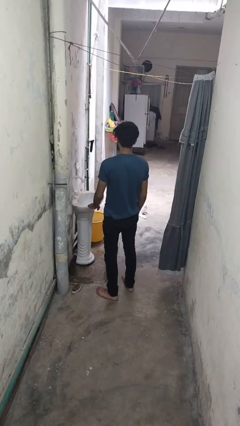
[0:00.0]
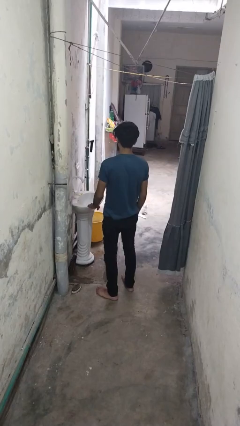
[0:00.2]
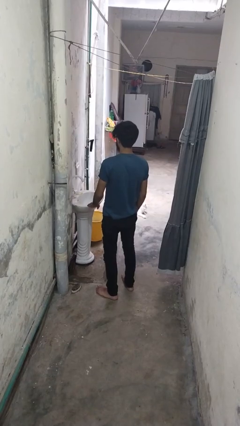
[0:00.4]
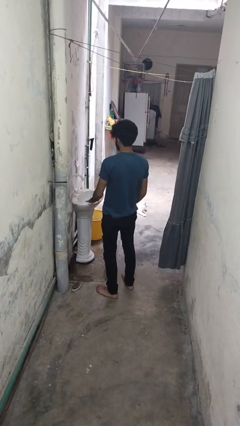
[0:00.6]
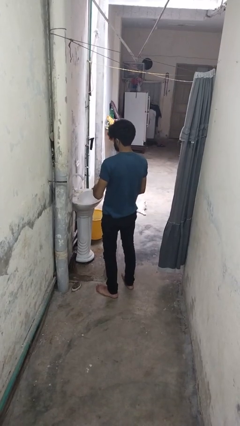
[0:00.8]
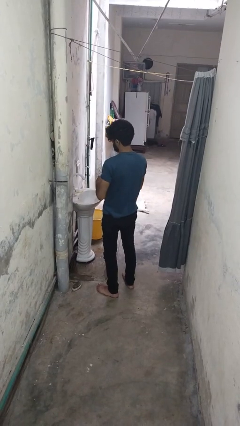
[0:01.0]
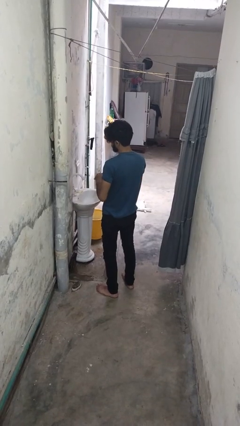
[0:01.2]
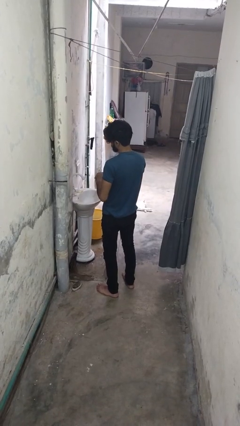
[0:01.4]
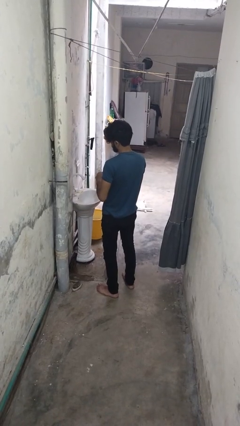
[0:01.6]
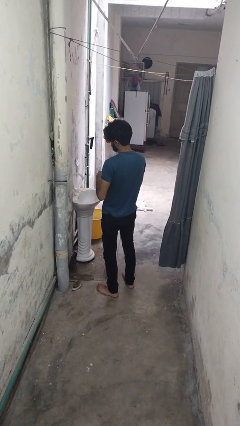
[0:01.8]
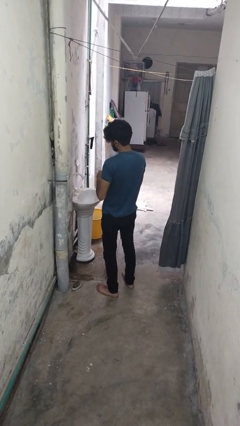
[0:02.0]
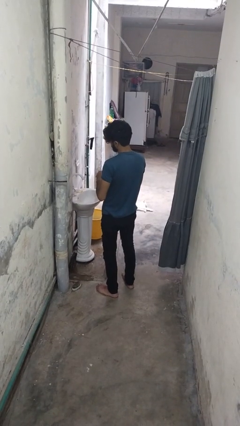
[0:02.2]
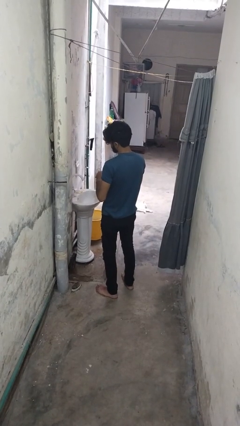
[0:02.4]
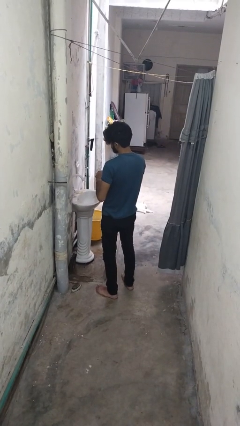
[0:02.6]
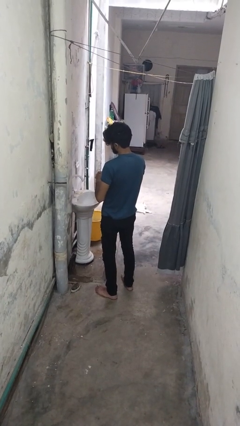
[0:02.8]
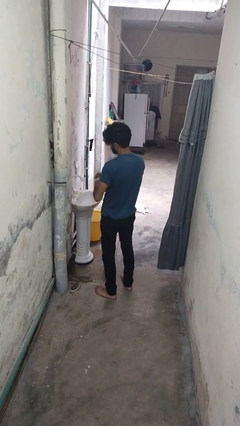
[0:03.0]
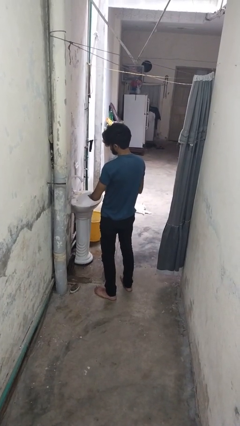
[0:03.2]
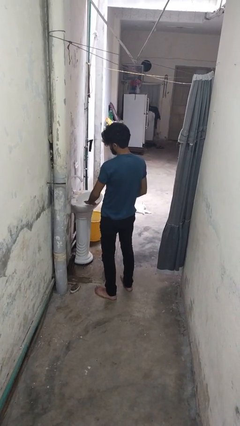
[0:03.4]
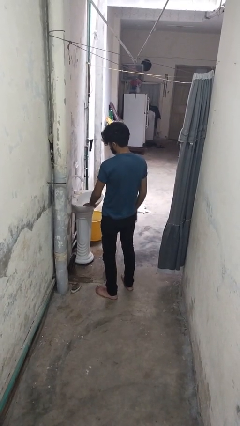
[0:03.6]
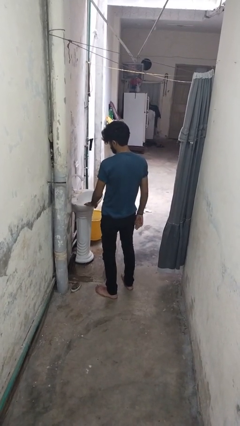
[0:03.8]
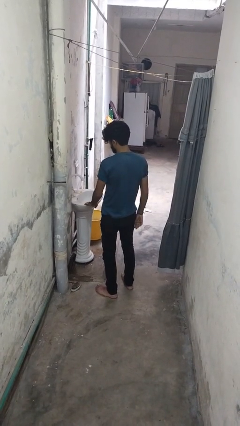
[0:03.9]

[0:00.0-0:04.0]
person puts on ring

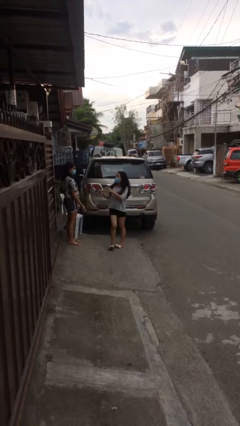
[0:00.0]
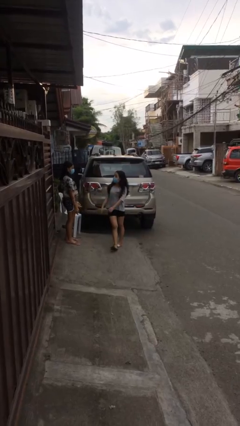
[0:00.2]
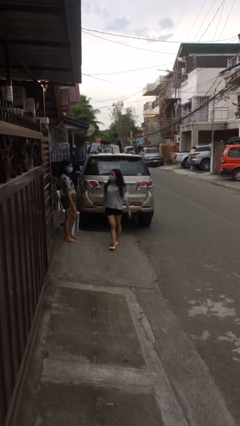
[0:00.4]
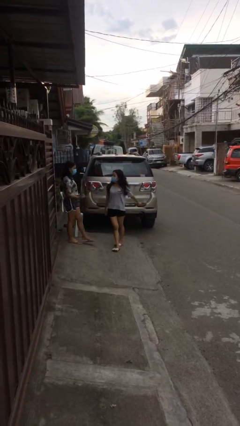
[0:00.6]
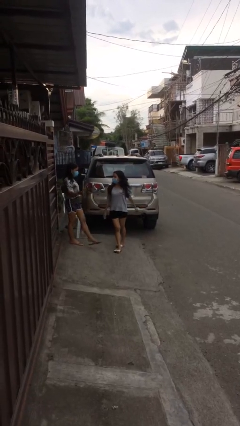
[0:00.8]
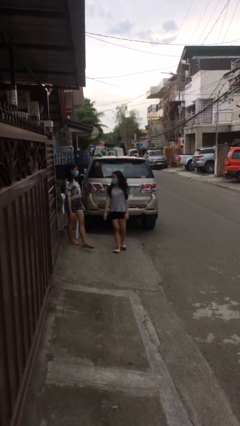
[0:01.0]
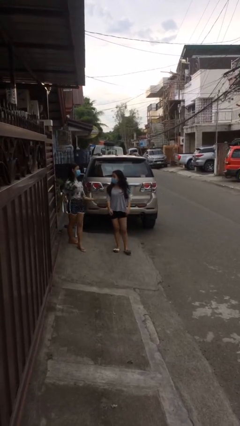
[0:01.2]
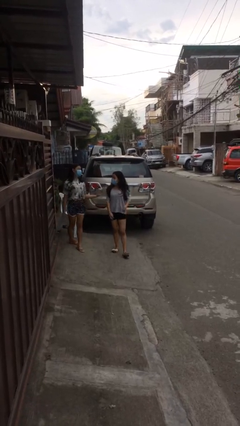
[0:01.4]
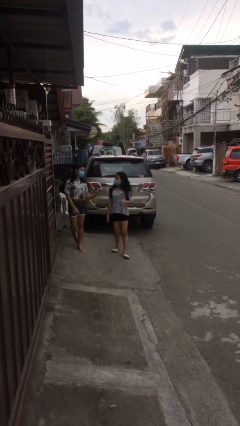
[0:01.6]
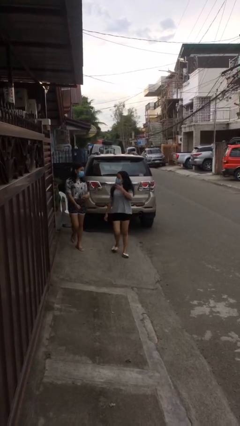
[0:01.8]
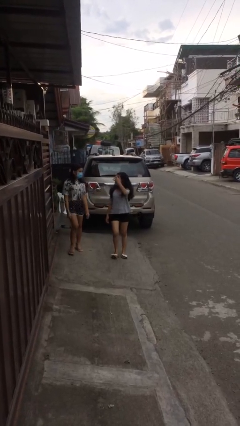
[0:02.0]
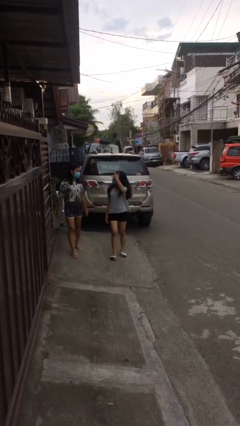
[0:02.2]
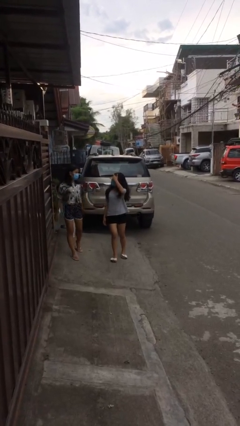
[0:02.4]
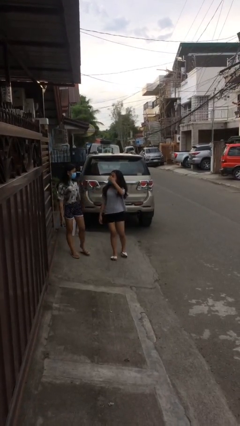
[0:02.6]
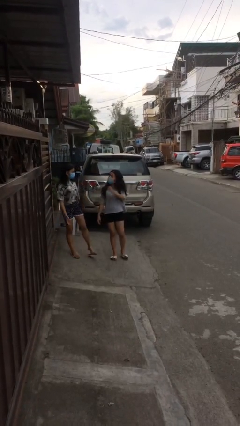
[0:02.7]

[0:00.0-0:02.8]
person talks to person

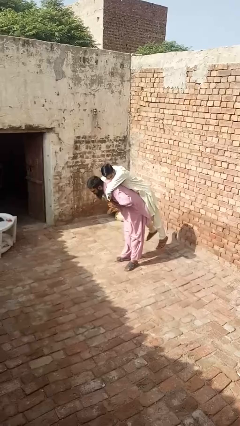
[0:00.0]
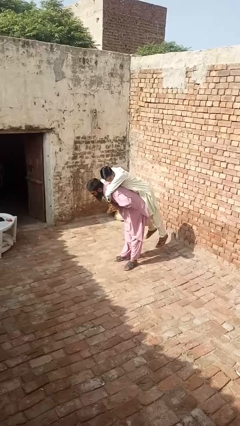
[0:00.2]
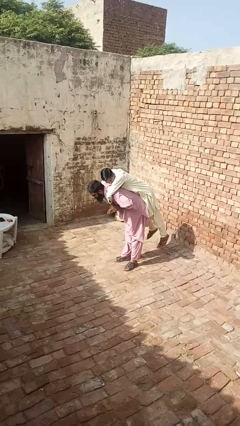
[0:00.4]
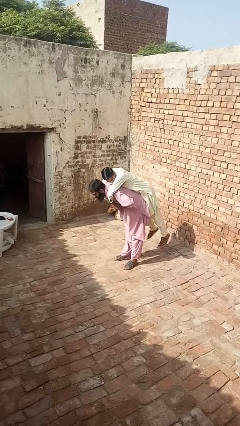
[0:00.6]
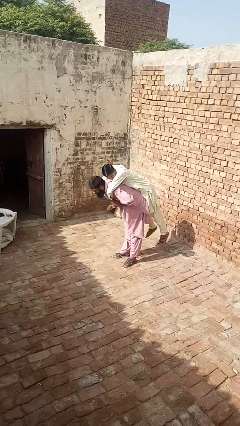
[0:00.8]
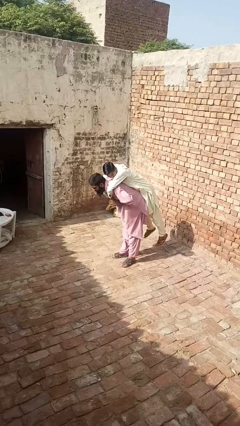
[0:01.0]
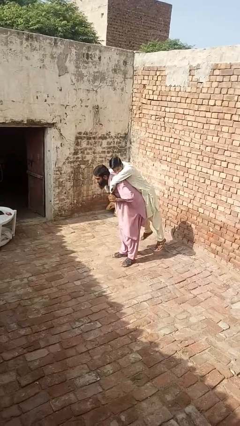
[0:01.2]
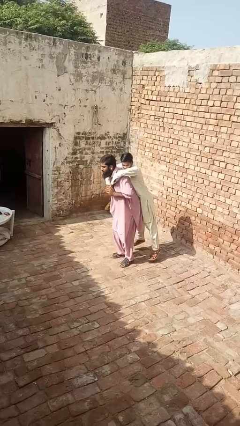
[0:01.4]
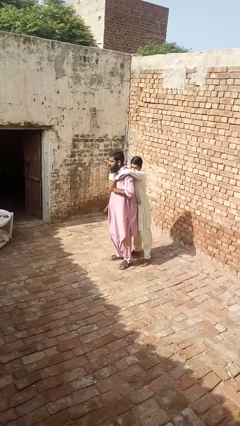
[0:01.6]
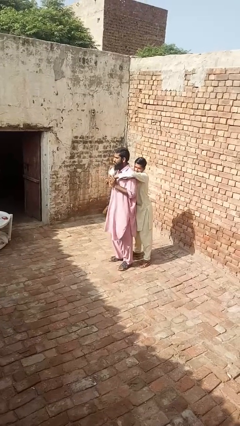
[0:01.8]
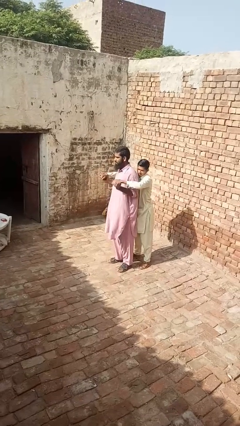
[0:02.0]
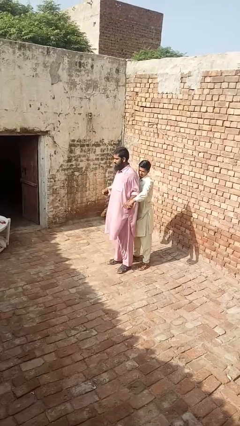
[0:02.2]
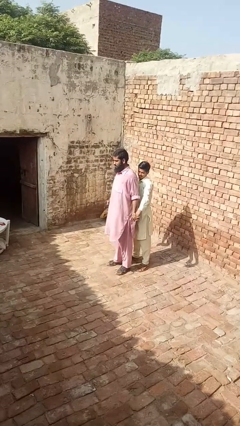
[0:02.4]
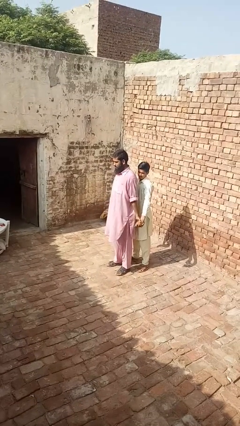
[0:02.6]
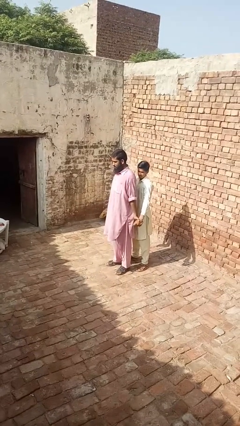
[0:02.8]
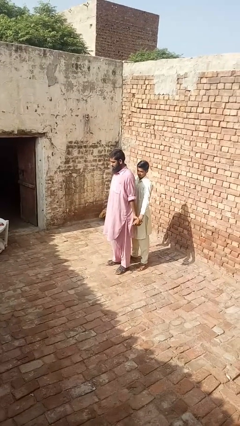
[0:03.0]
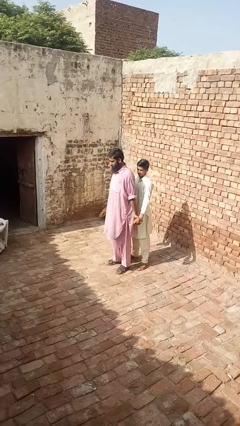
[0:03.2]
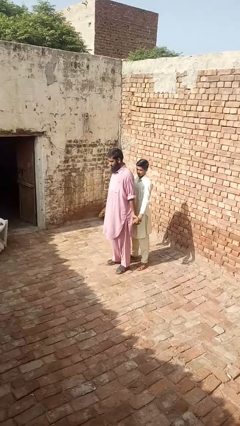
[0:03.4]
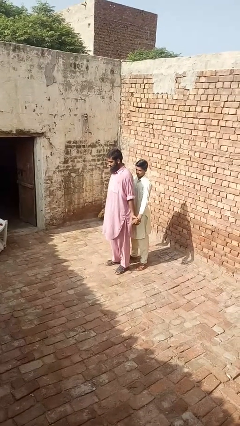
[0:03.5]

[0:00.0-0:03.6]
person puts down person

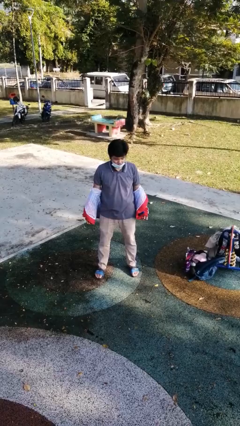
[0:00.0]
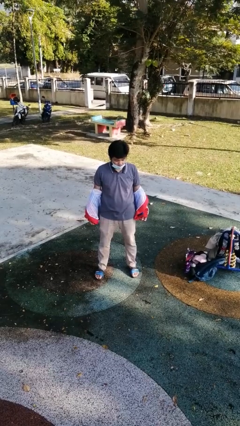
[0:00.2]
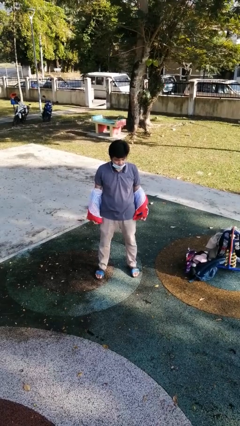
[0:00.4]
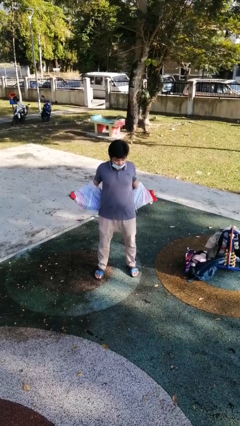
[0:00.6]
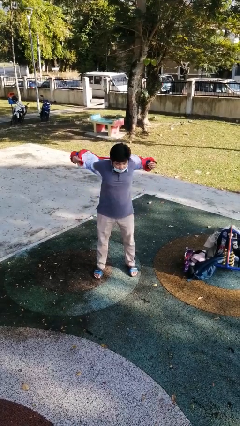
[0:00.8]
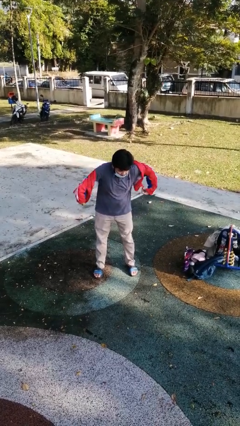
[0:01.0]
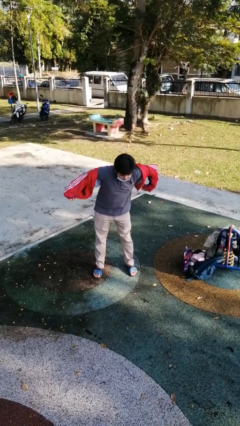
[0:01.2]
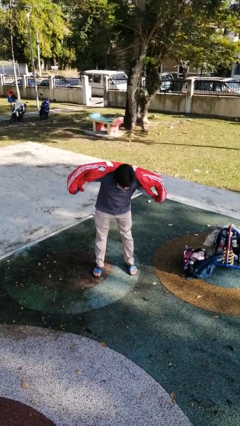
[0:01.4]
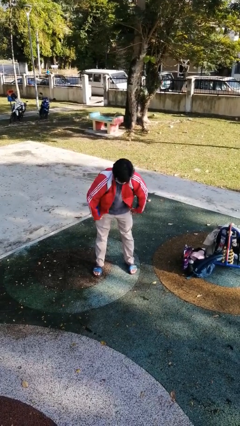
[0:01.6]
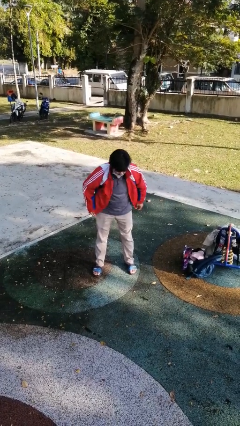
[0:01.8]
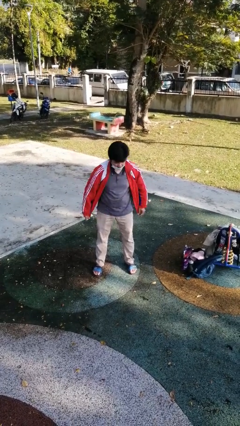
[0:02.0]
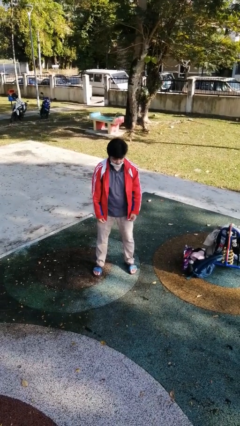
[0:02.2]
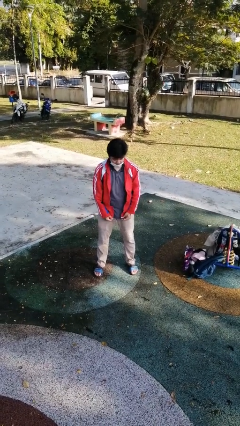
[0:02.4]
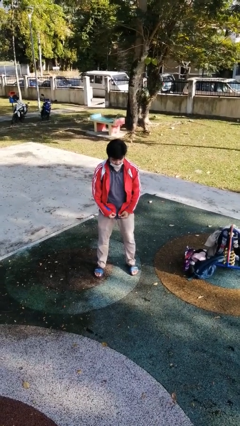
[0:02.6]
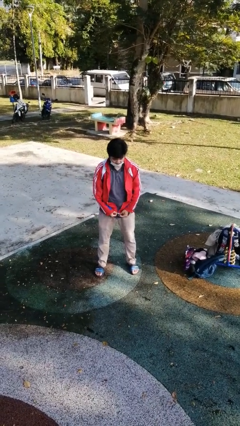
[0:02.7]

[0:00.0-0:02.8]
person puts on jacket

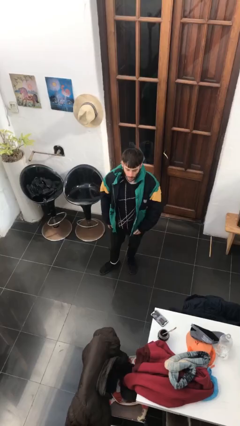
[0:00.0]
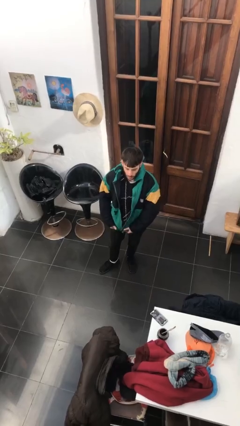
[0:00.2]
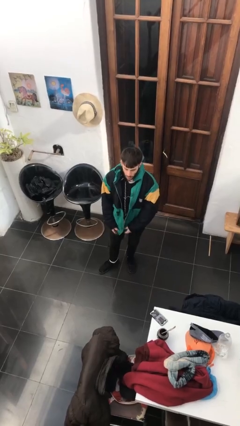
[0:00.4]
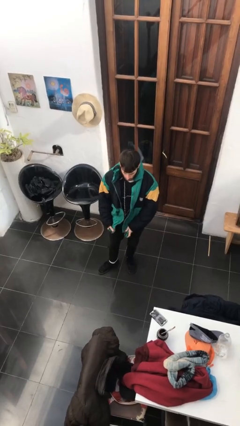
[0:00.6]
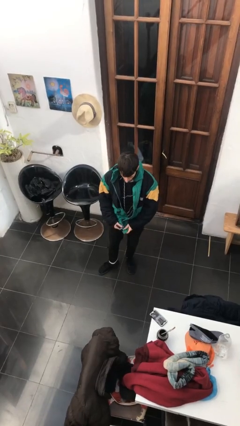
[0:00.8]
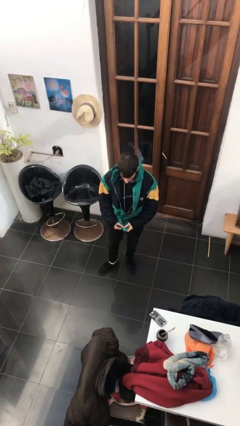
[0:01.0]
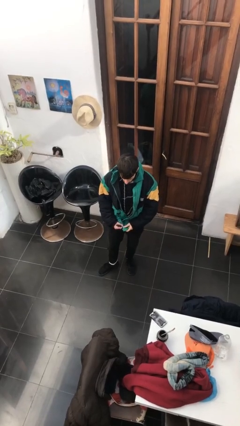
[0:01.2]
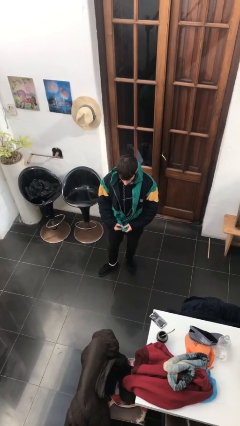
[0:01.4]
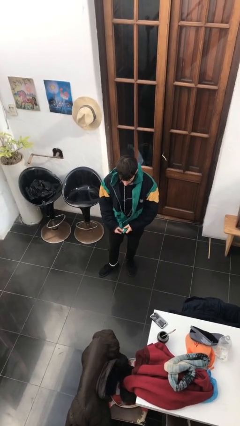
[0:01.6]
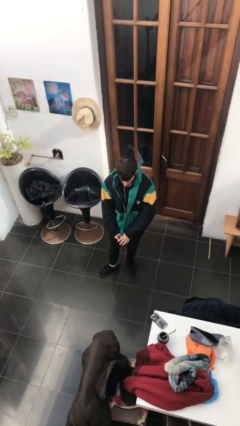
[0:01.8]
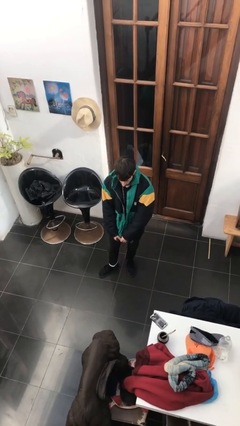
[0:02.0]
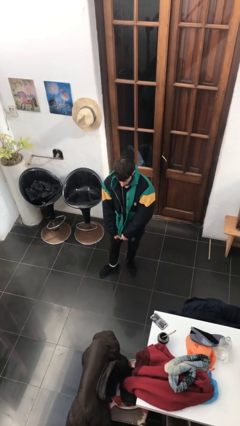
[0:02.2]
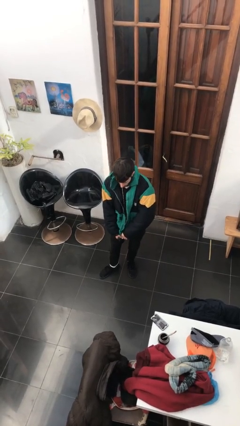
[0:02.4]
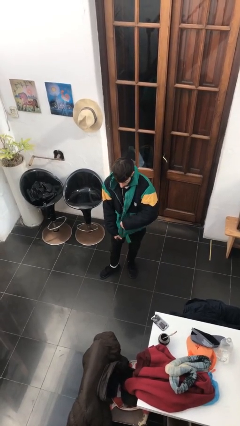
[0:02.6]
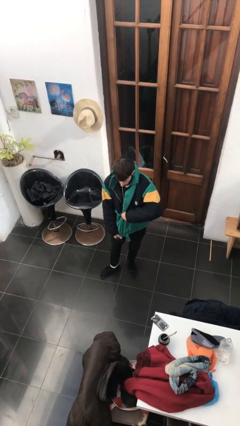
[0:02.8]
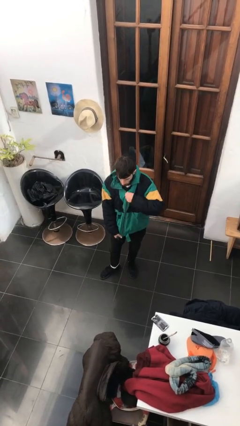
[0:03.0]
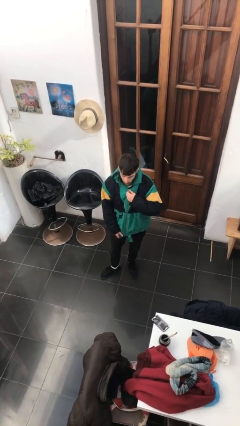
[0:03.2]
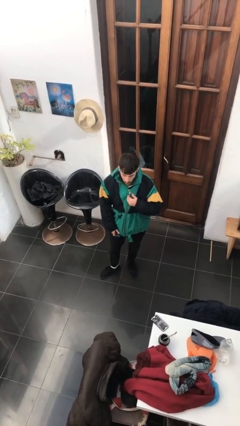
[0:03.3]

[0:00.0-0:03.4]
person zips up jacket

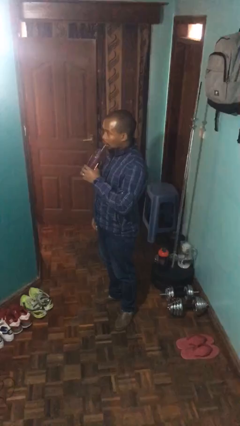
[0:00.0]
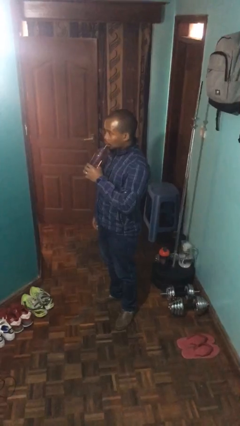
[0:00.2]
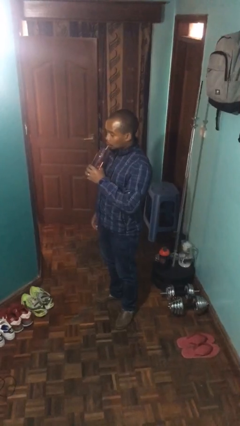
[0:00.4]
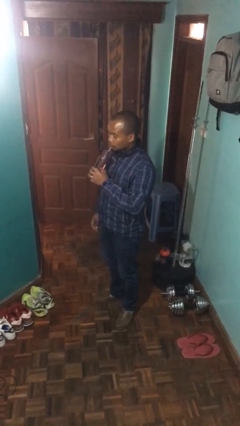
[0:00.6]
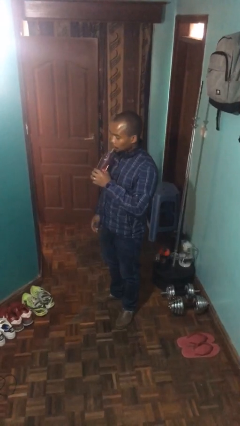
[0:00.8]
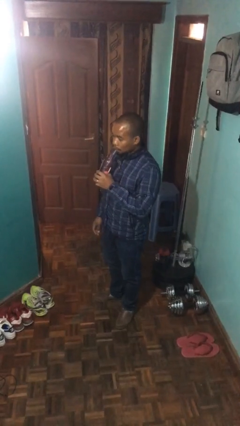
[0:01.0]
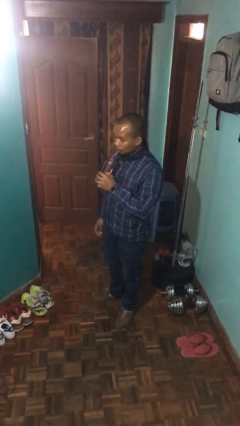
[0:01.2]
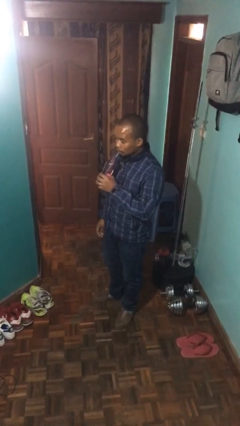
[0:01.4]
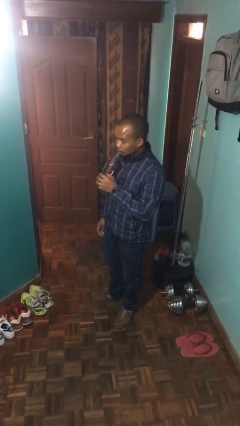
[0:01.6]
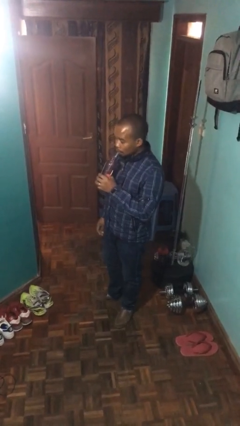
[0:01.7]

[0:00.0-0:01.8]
person drinks from straw
